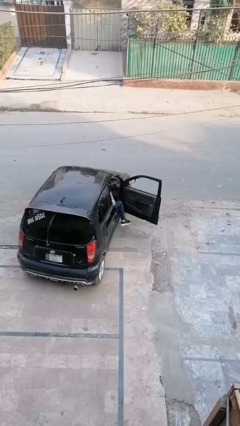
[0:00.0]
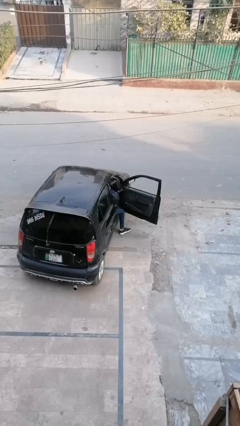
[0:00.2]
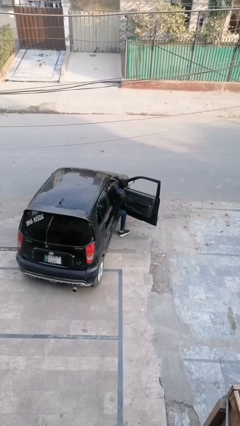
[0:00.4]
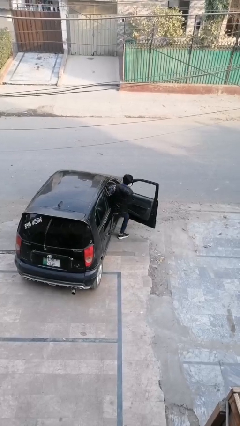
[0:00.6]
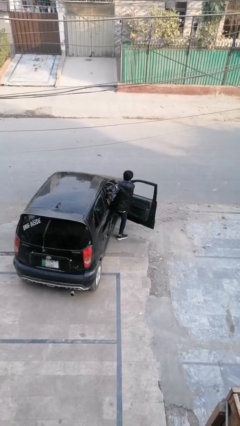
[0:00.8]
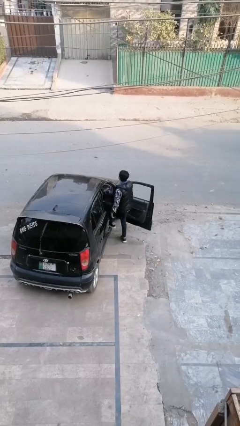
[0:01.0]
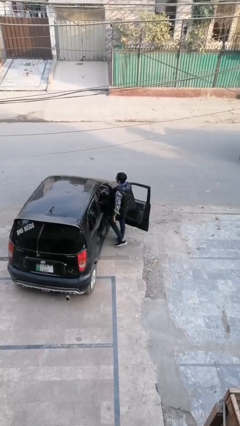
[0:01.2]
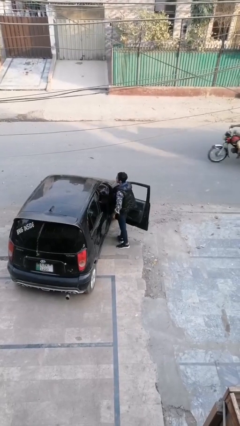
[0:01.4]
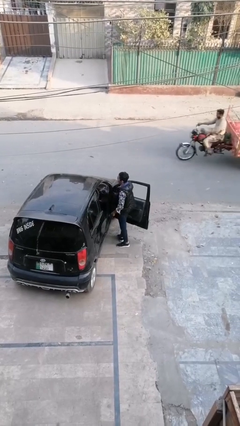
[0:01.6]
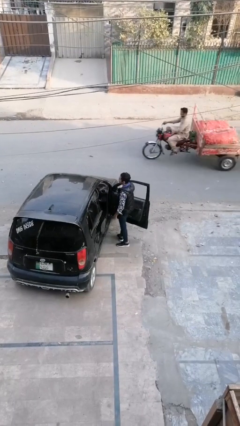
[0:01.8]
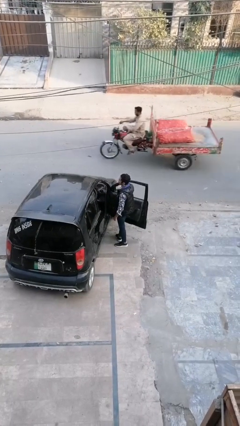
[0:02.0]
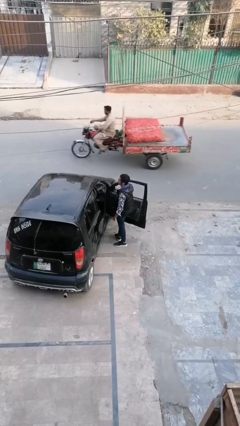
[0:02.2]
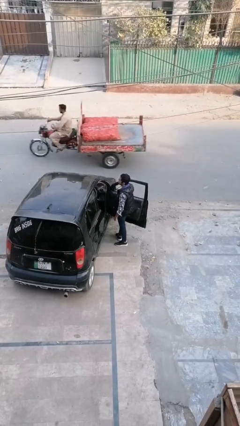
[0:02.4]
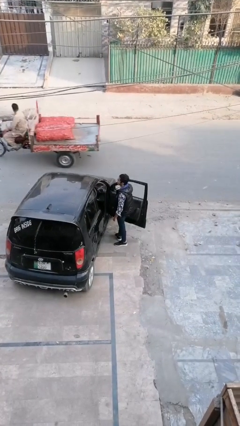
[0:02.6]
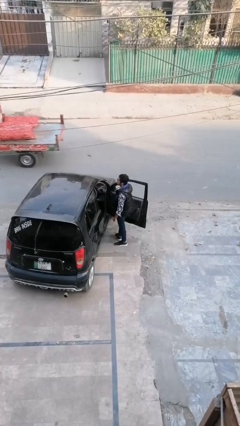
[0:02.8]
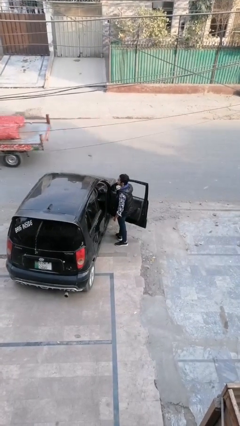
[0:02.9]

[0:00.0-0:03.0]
person exits car

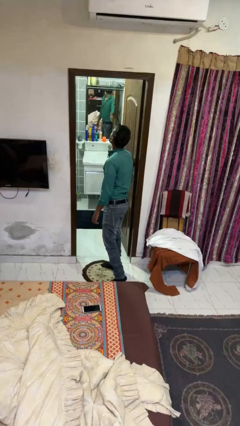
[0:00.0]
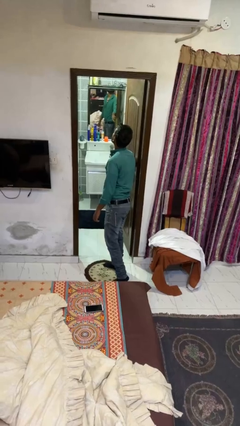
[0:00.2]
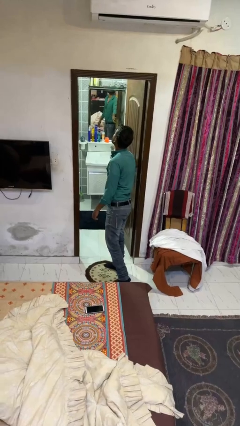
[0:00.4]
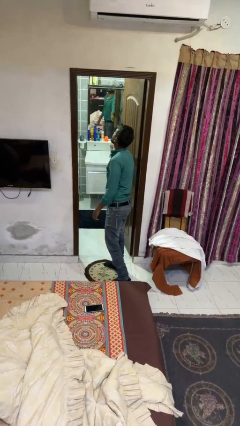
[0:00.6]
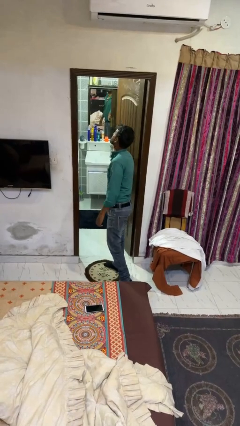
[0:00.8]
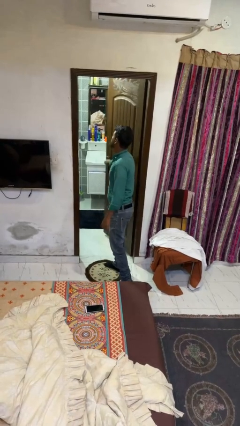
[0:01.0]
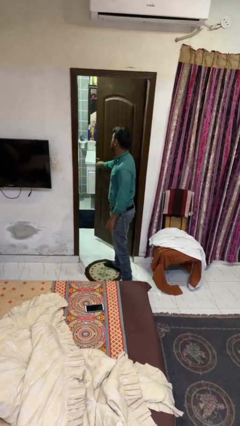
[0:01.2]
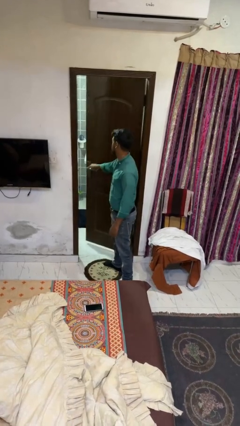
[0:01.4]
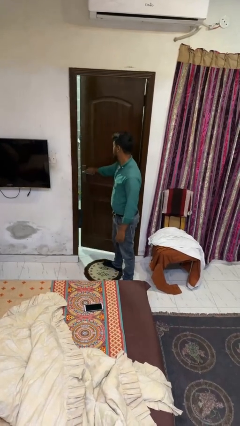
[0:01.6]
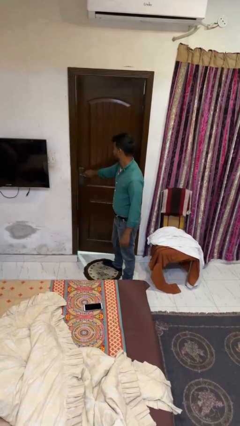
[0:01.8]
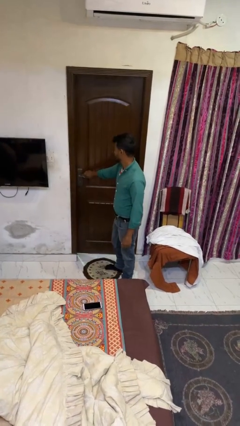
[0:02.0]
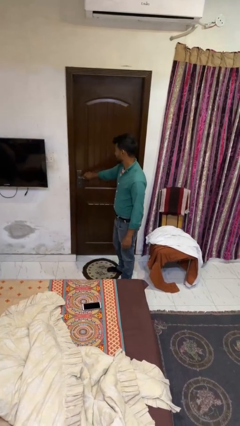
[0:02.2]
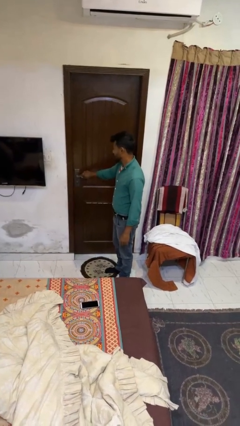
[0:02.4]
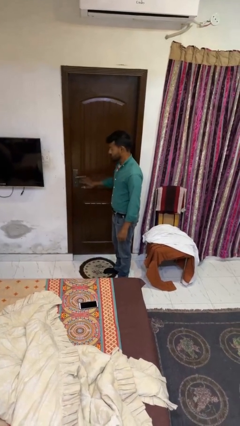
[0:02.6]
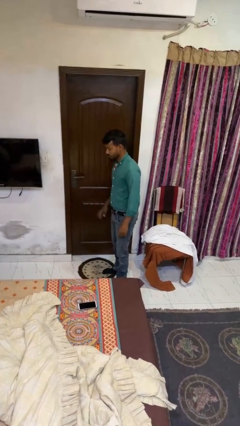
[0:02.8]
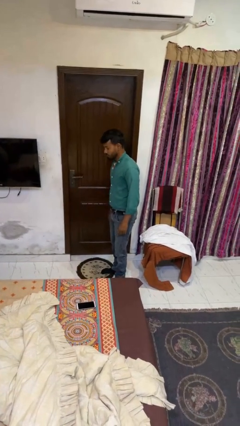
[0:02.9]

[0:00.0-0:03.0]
person closes facility door

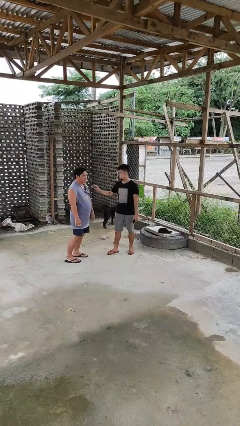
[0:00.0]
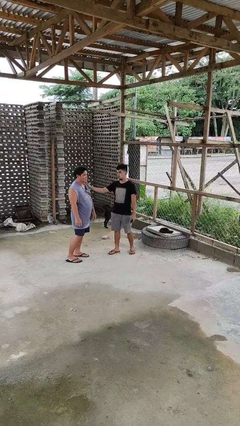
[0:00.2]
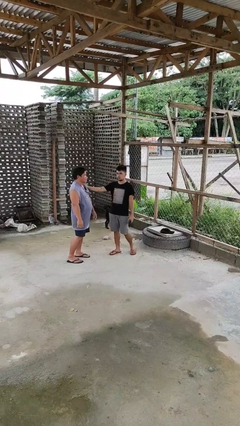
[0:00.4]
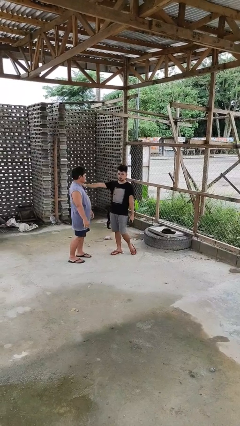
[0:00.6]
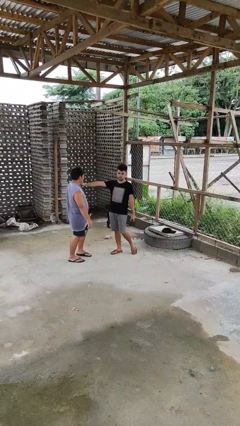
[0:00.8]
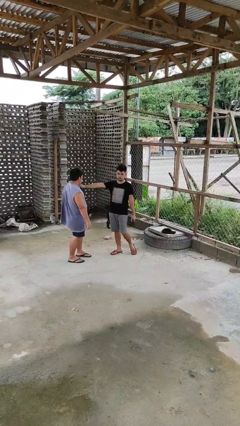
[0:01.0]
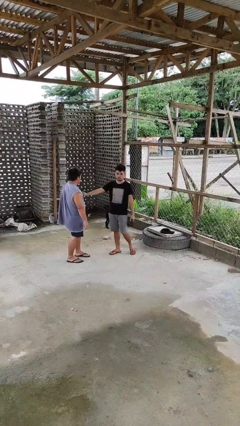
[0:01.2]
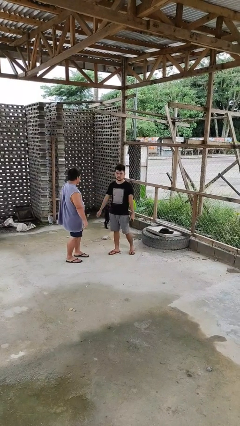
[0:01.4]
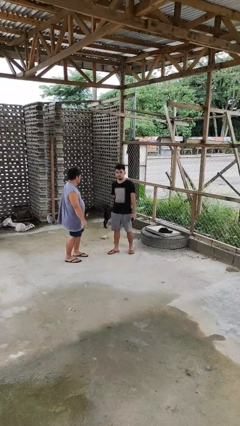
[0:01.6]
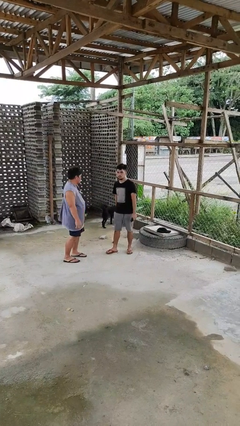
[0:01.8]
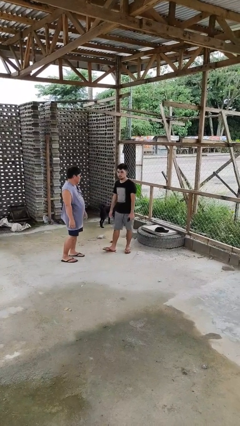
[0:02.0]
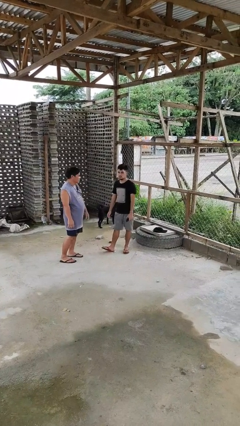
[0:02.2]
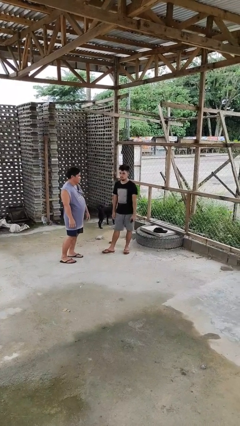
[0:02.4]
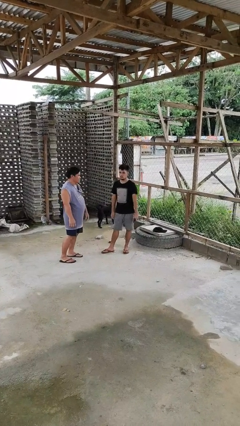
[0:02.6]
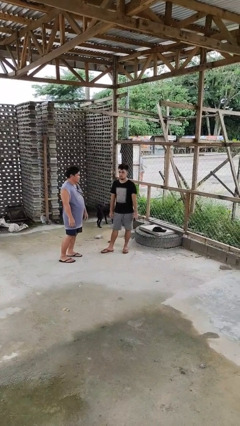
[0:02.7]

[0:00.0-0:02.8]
person shoves person

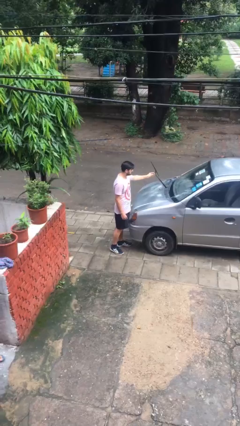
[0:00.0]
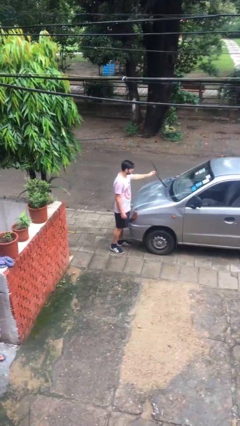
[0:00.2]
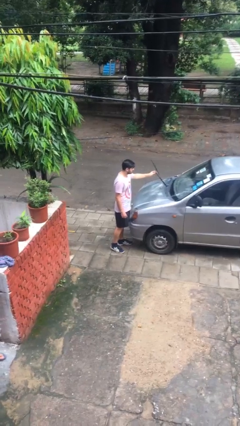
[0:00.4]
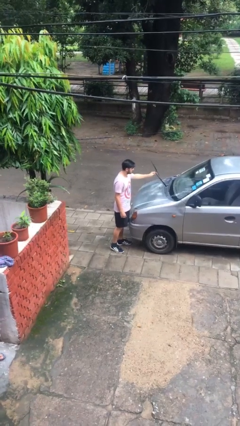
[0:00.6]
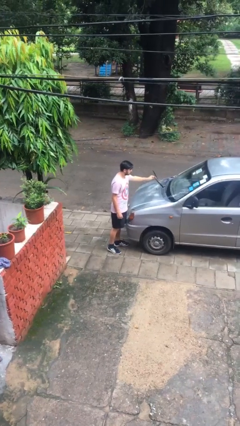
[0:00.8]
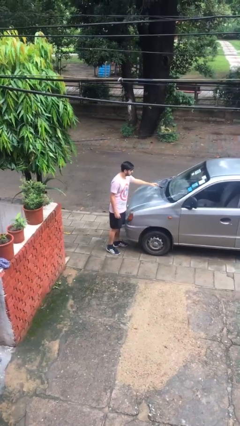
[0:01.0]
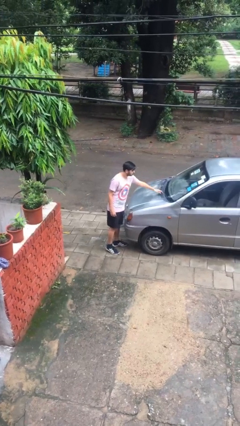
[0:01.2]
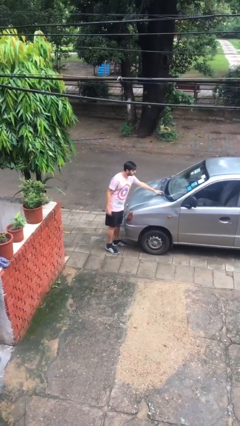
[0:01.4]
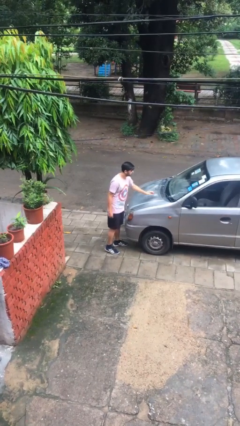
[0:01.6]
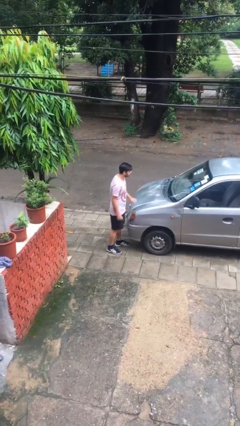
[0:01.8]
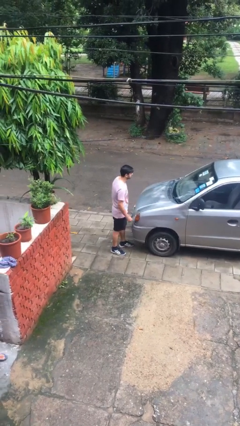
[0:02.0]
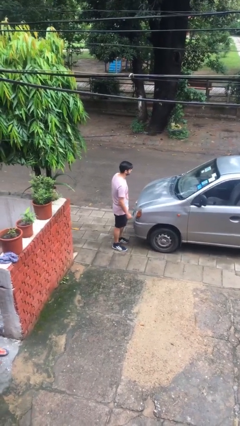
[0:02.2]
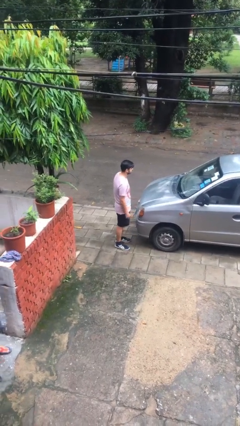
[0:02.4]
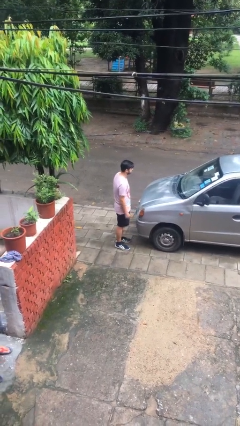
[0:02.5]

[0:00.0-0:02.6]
person flips down car wipers

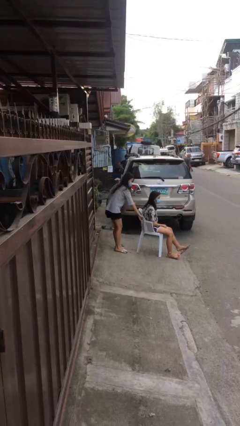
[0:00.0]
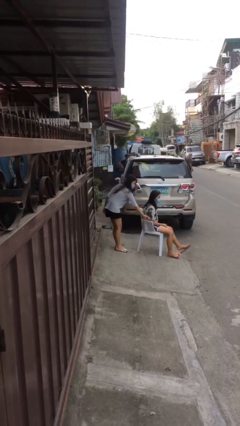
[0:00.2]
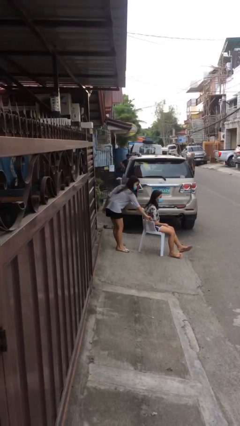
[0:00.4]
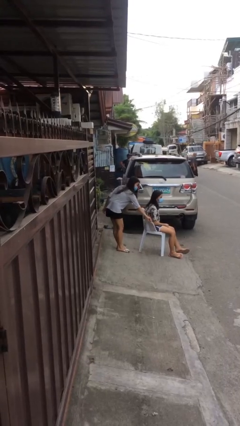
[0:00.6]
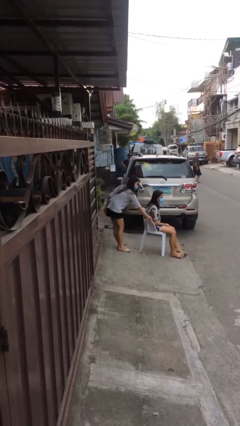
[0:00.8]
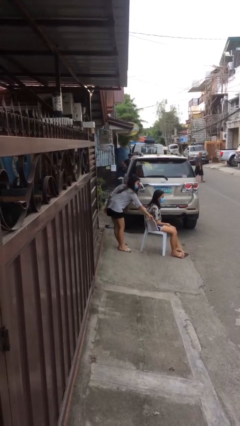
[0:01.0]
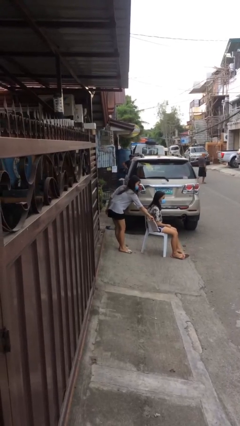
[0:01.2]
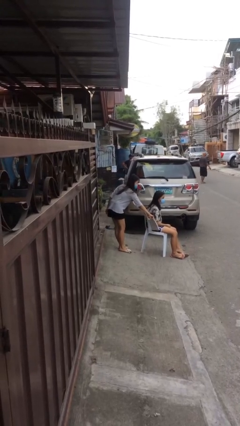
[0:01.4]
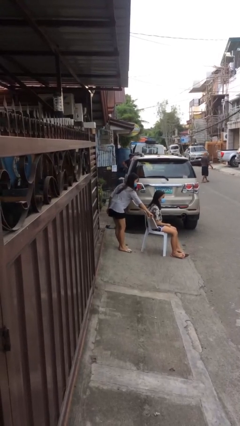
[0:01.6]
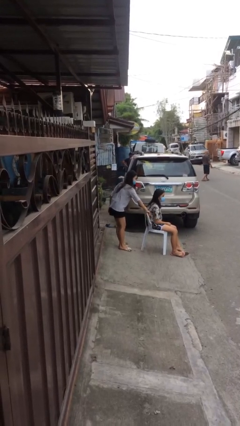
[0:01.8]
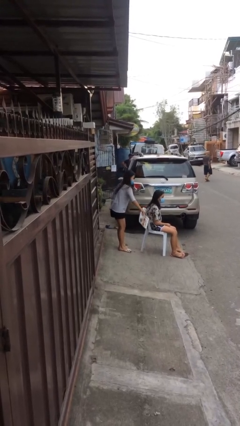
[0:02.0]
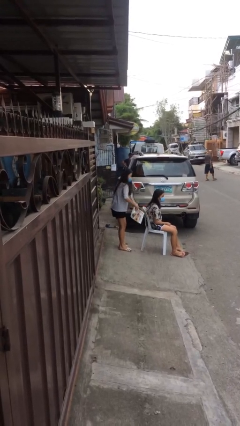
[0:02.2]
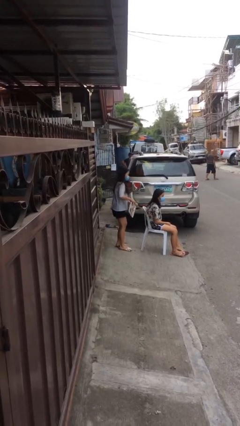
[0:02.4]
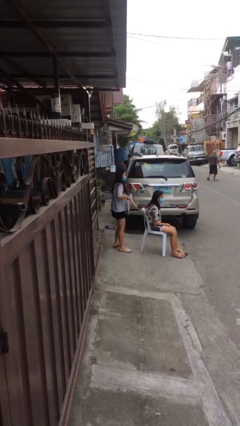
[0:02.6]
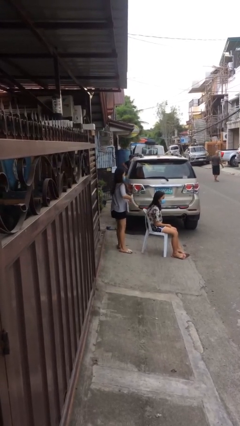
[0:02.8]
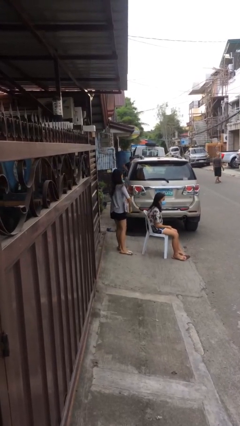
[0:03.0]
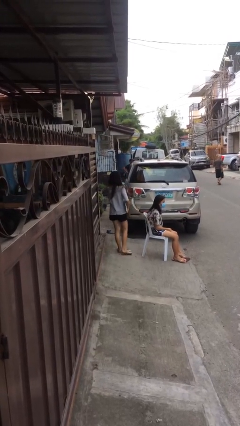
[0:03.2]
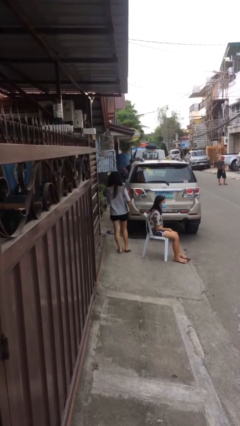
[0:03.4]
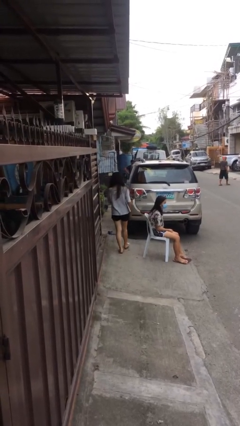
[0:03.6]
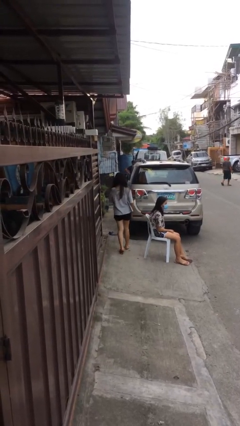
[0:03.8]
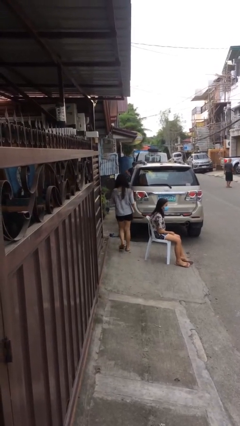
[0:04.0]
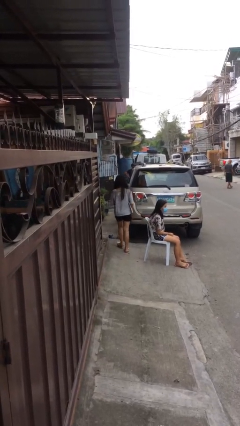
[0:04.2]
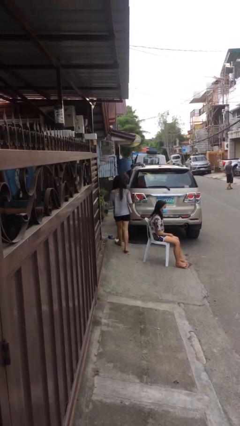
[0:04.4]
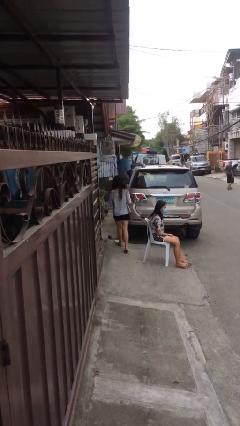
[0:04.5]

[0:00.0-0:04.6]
person steals object from person

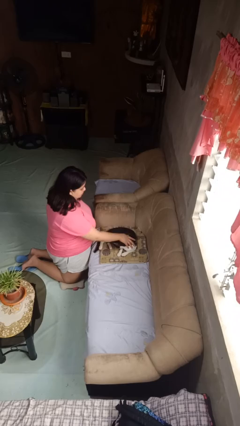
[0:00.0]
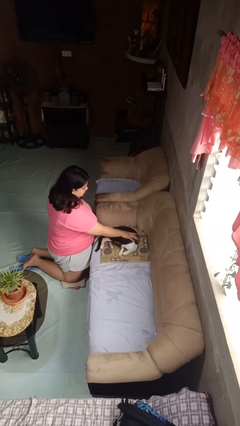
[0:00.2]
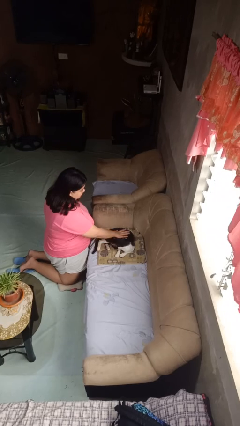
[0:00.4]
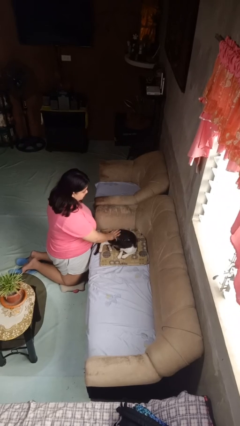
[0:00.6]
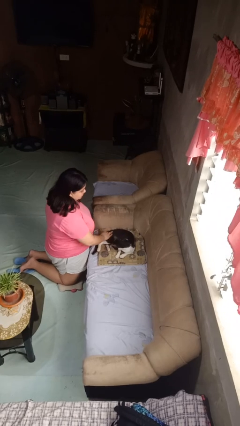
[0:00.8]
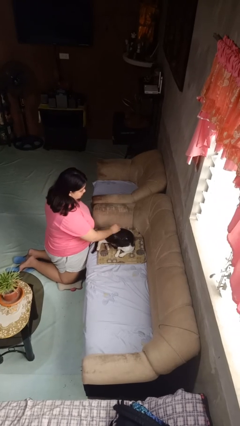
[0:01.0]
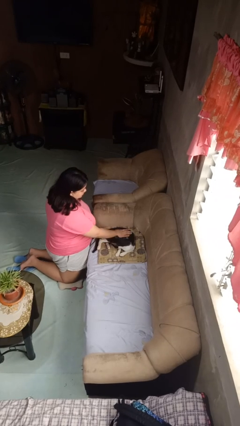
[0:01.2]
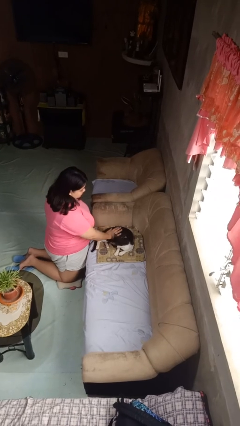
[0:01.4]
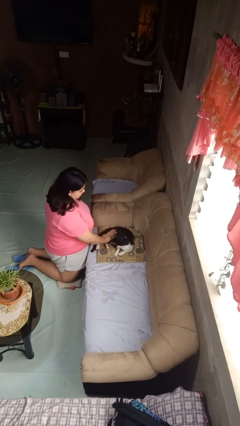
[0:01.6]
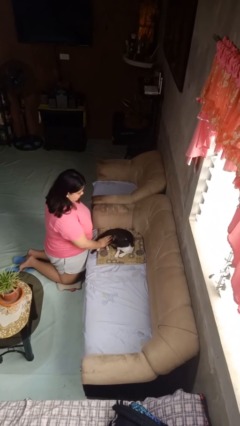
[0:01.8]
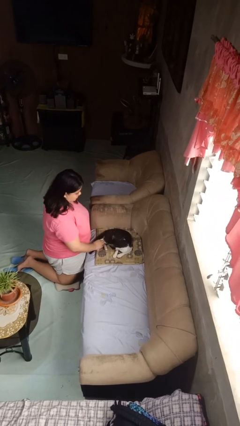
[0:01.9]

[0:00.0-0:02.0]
person pets cat
